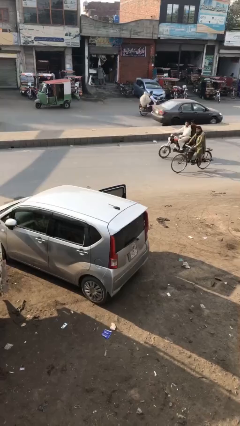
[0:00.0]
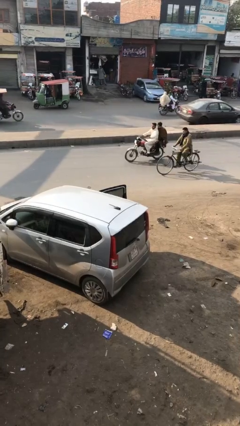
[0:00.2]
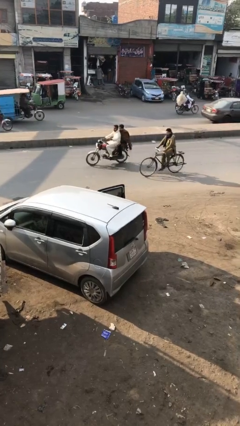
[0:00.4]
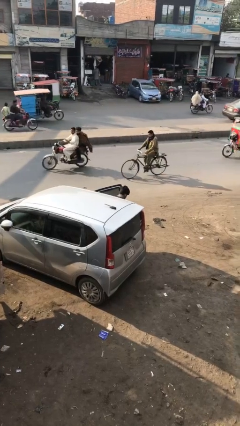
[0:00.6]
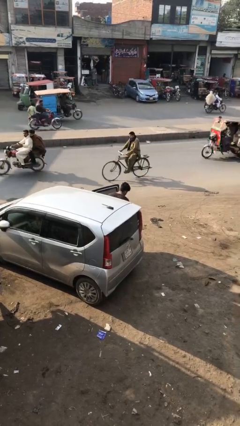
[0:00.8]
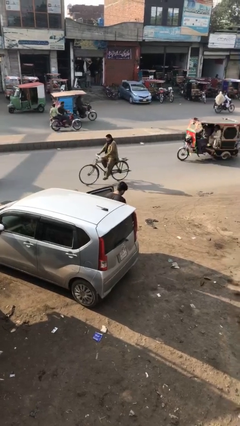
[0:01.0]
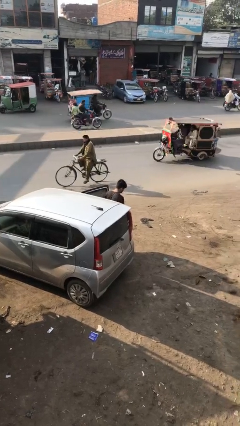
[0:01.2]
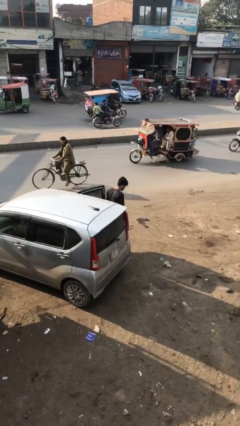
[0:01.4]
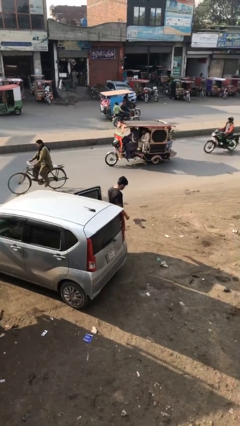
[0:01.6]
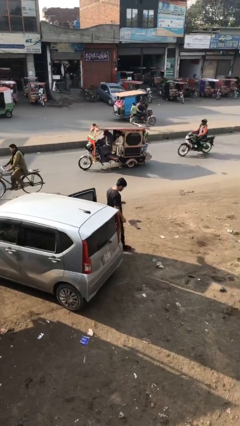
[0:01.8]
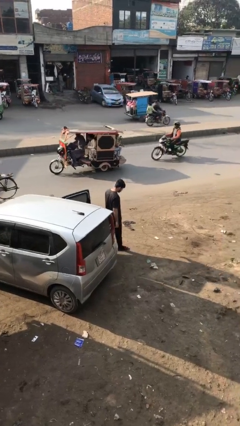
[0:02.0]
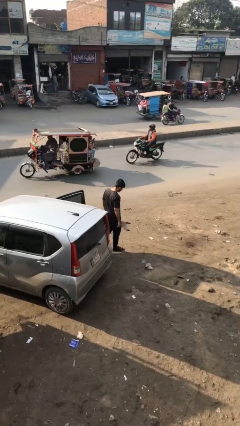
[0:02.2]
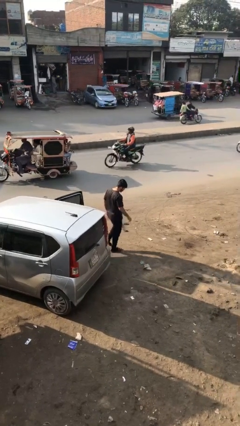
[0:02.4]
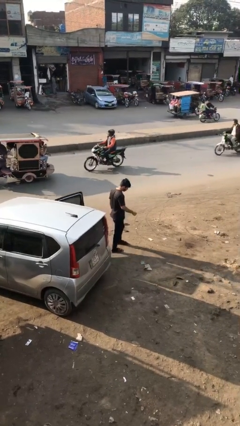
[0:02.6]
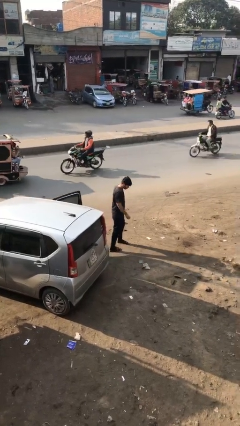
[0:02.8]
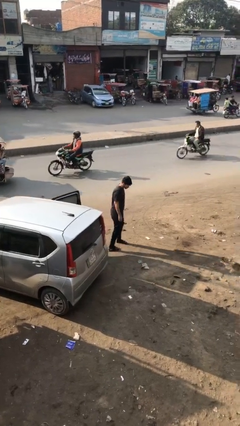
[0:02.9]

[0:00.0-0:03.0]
person exits car

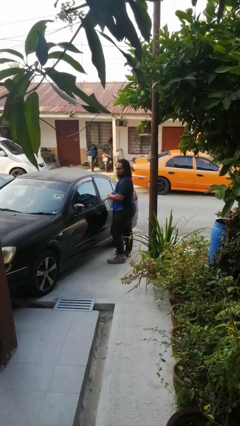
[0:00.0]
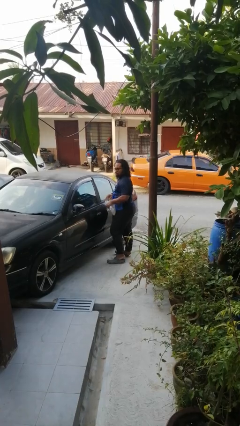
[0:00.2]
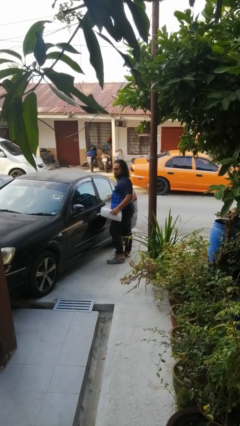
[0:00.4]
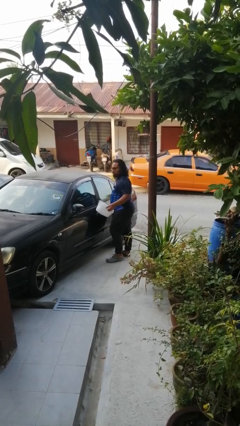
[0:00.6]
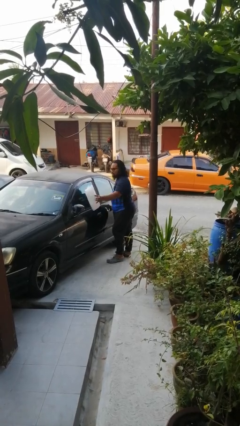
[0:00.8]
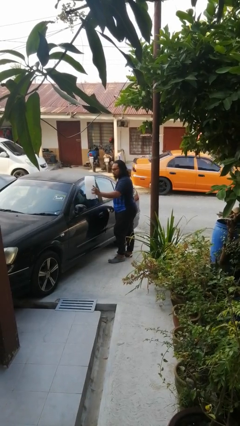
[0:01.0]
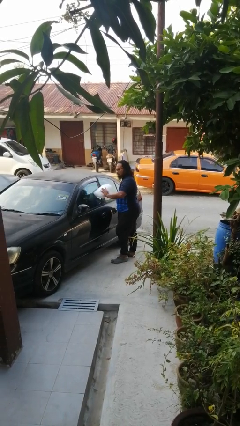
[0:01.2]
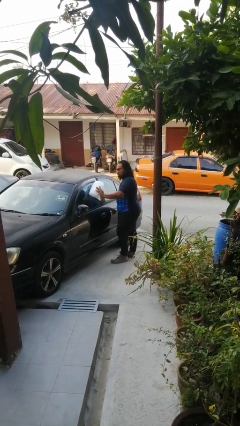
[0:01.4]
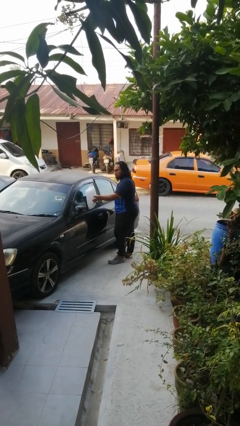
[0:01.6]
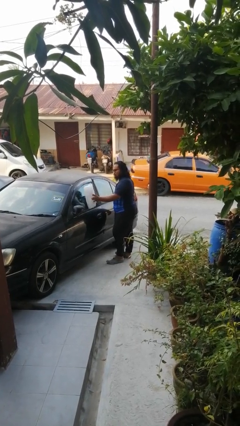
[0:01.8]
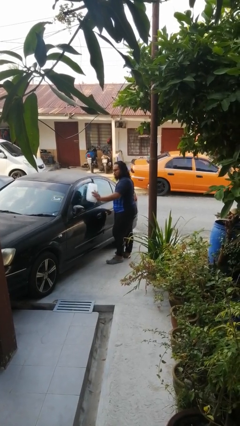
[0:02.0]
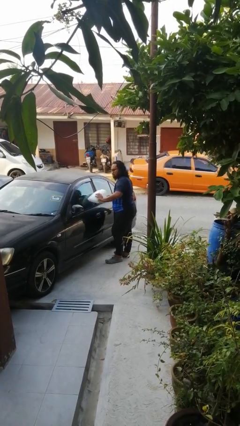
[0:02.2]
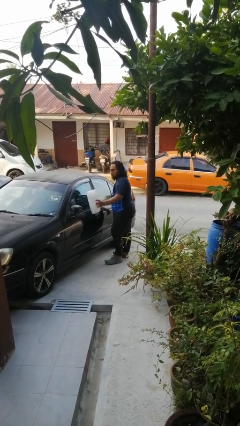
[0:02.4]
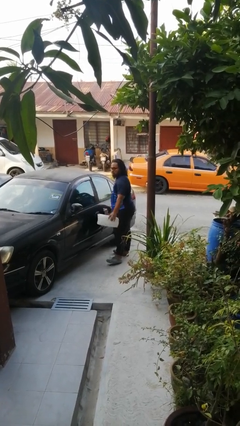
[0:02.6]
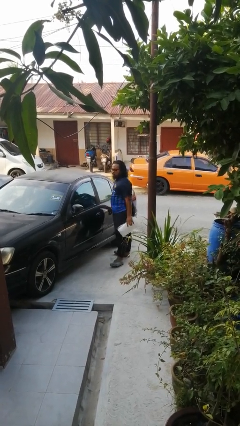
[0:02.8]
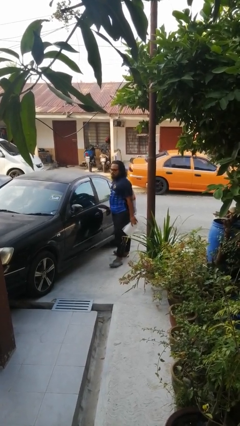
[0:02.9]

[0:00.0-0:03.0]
person polishes car with rag

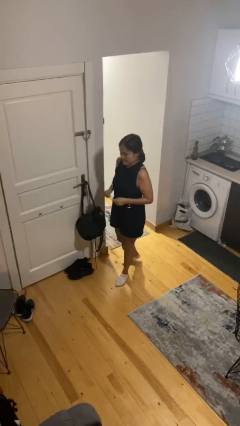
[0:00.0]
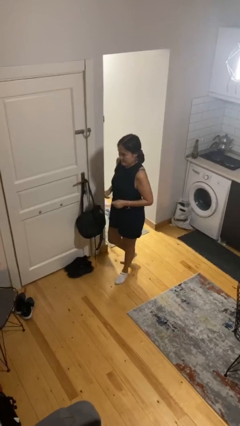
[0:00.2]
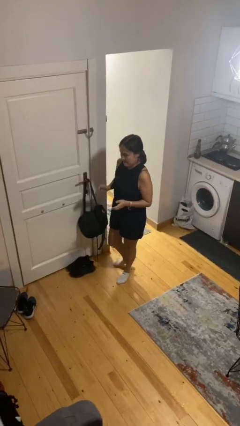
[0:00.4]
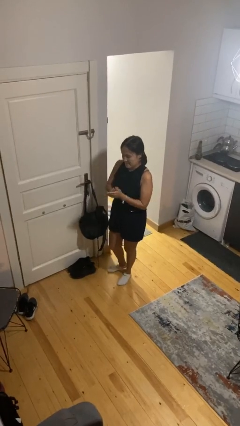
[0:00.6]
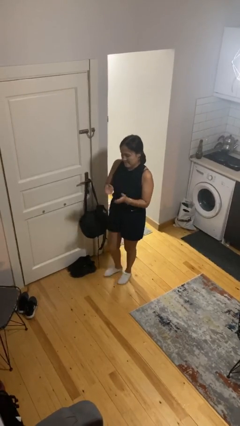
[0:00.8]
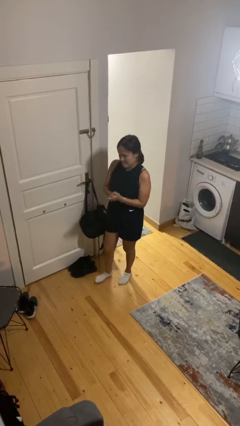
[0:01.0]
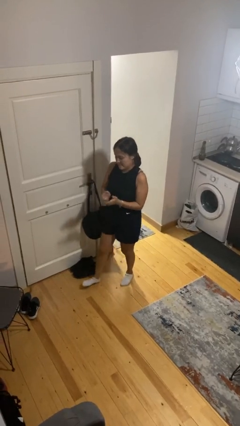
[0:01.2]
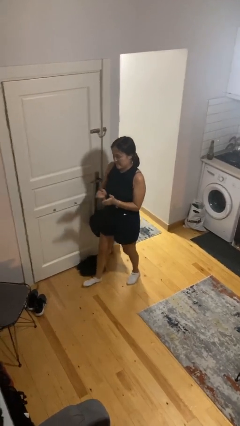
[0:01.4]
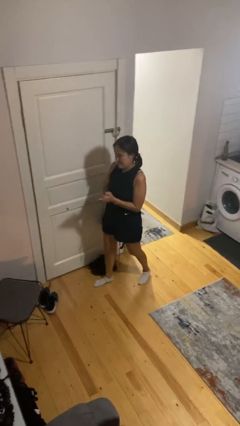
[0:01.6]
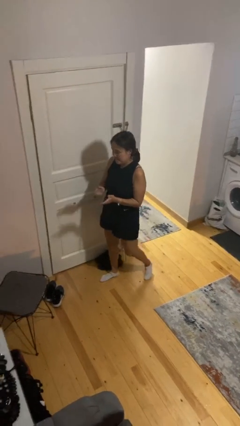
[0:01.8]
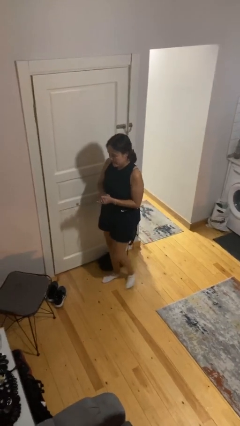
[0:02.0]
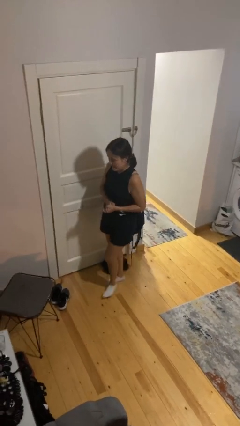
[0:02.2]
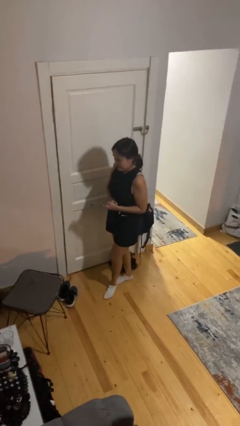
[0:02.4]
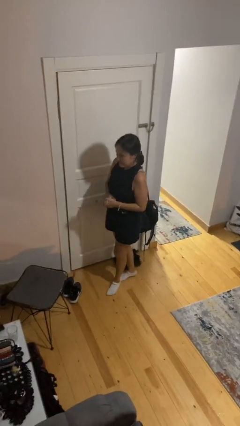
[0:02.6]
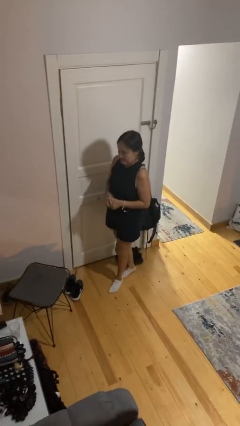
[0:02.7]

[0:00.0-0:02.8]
person claps hands

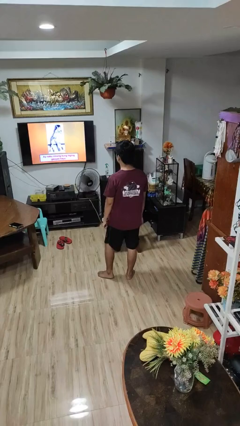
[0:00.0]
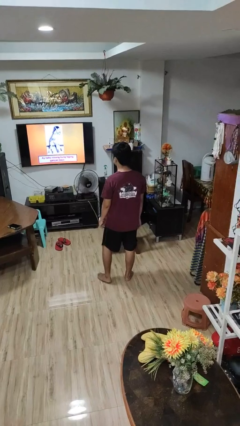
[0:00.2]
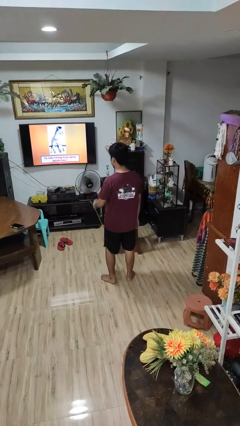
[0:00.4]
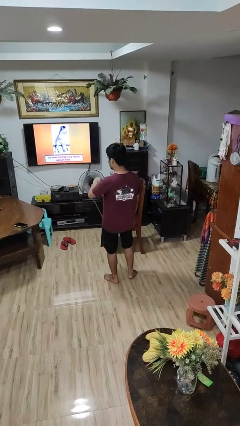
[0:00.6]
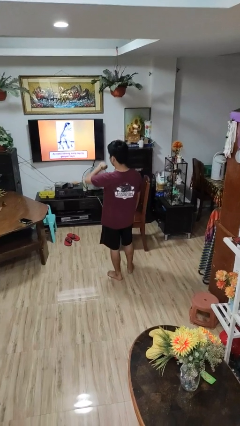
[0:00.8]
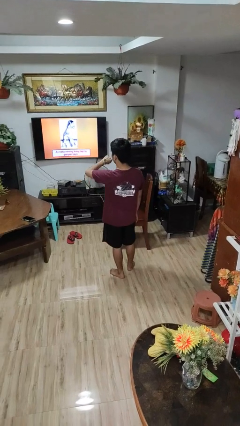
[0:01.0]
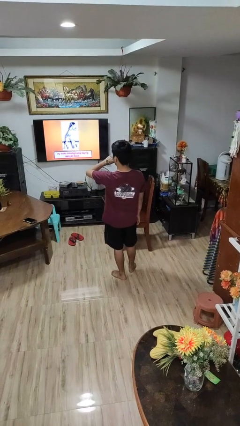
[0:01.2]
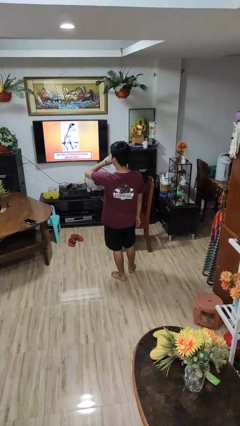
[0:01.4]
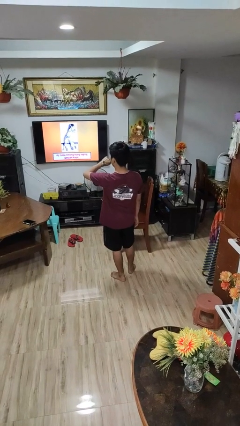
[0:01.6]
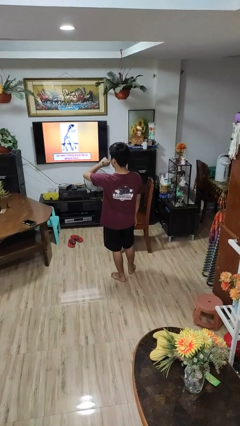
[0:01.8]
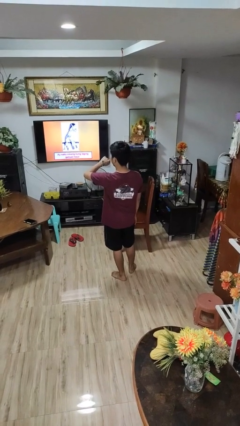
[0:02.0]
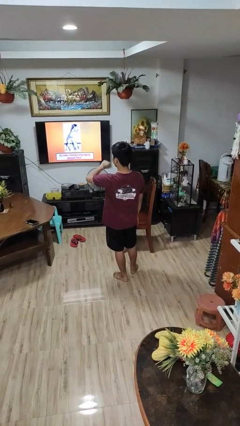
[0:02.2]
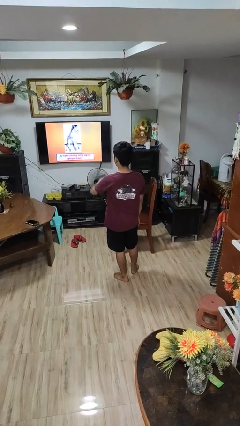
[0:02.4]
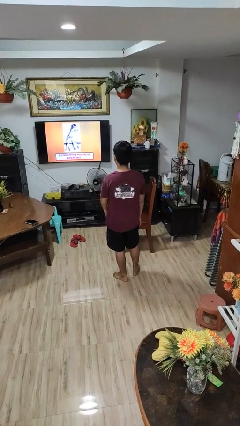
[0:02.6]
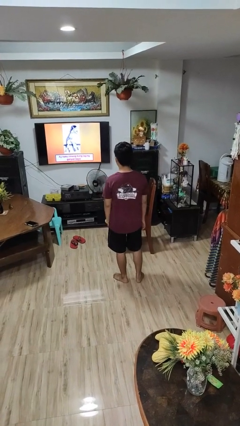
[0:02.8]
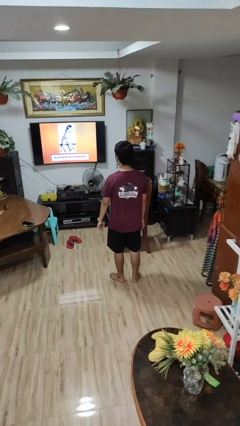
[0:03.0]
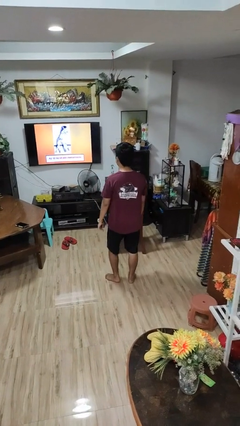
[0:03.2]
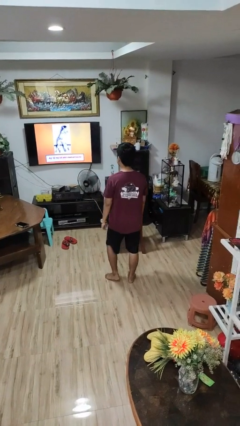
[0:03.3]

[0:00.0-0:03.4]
person looks at wristwatch

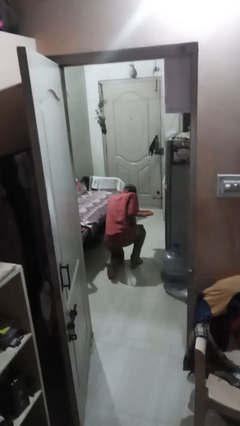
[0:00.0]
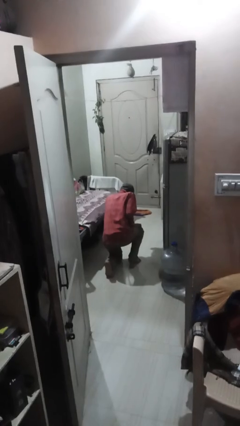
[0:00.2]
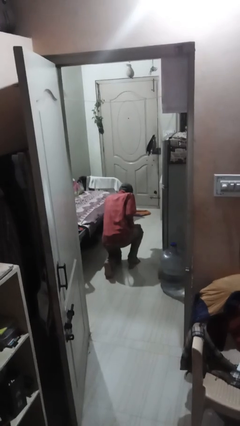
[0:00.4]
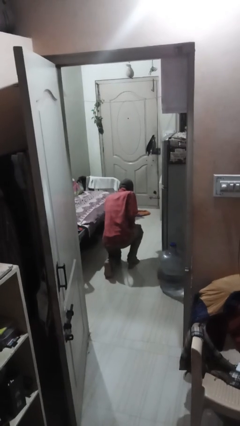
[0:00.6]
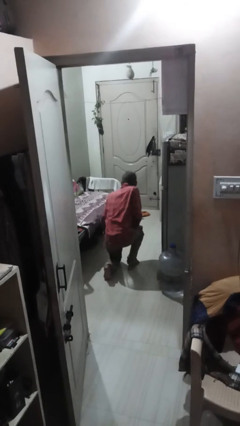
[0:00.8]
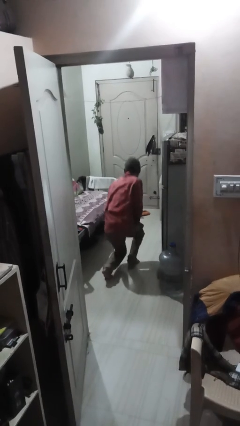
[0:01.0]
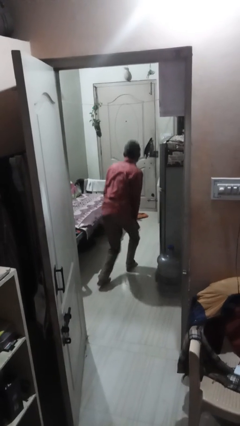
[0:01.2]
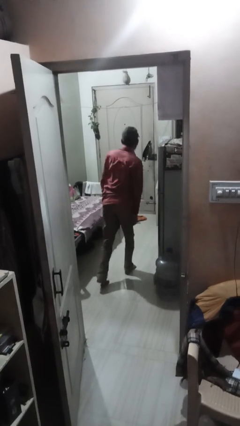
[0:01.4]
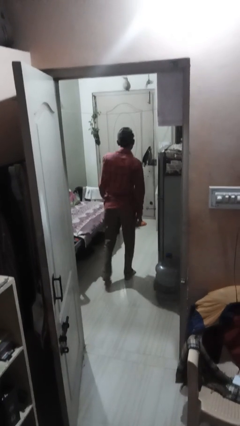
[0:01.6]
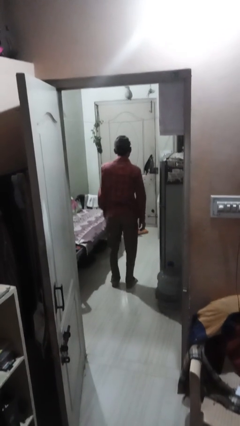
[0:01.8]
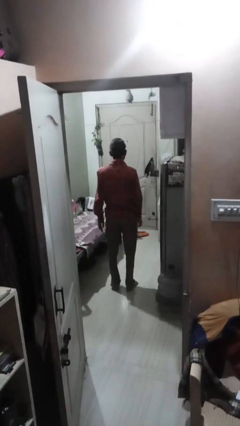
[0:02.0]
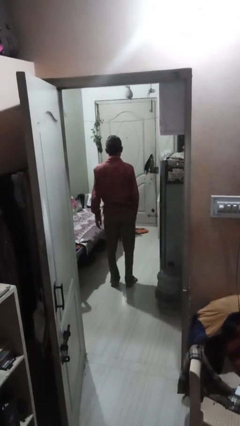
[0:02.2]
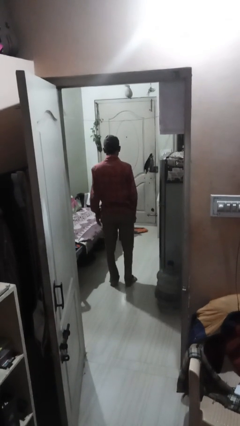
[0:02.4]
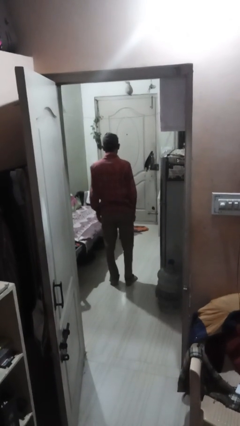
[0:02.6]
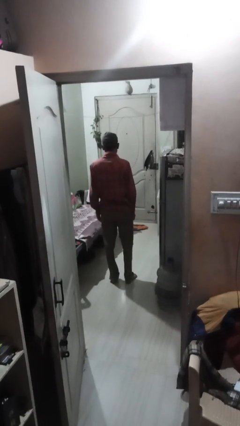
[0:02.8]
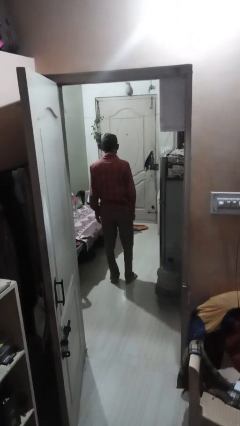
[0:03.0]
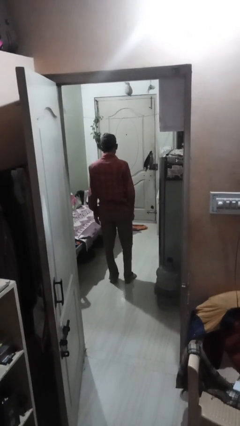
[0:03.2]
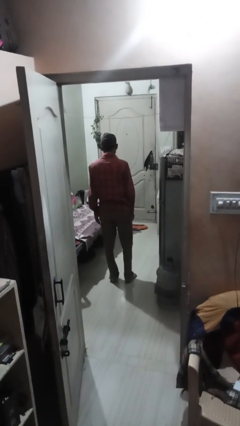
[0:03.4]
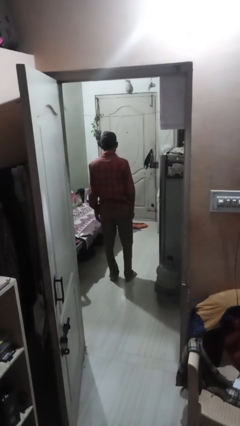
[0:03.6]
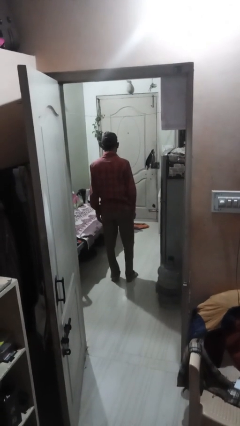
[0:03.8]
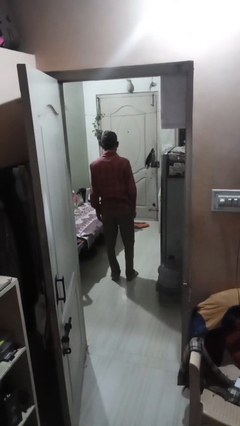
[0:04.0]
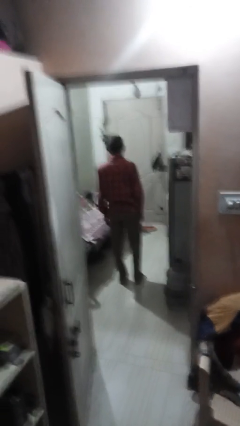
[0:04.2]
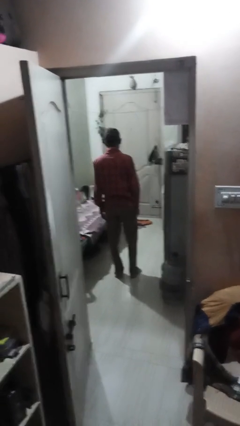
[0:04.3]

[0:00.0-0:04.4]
person stands up from floor

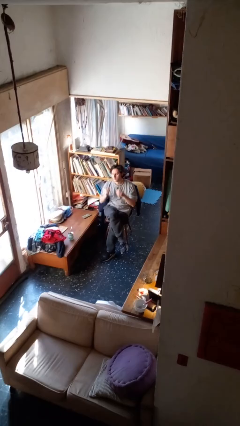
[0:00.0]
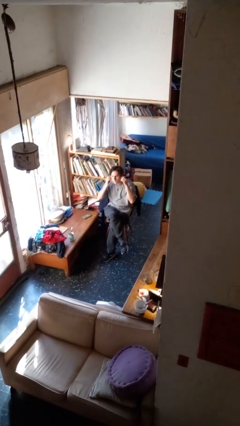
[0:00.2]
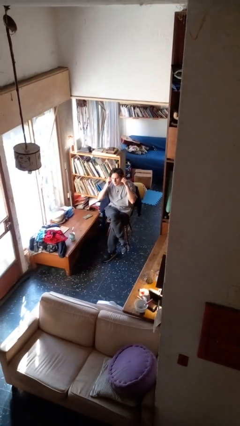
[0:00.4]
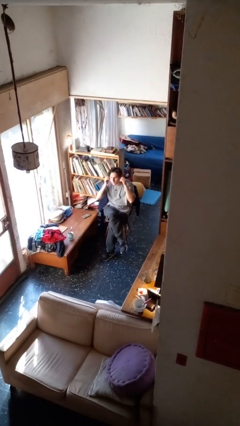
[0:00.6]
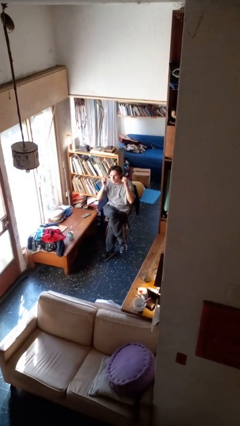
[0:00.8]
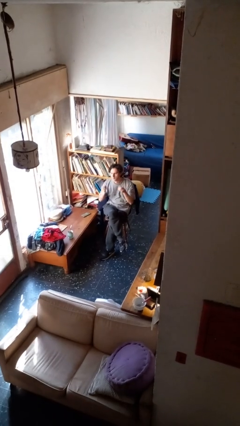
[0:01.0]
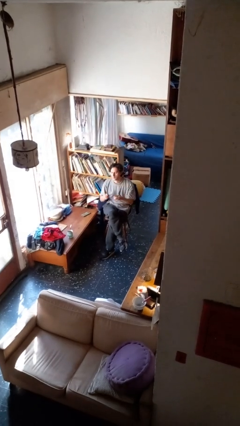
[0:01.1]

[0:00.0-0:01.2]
person takes off headphones
